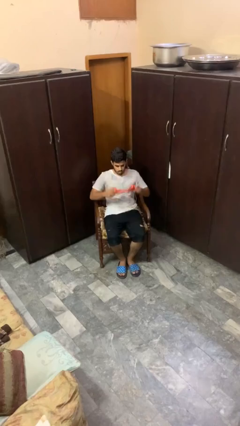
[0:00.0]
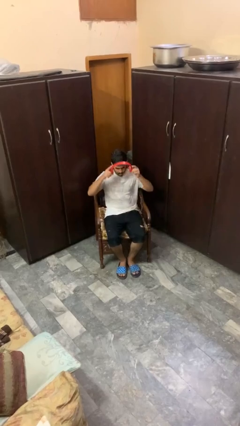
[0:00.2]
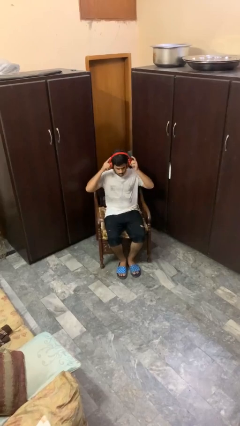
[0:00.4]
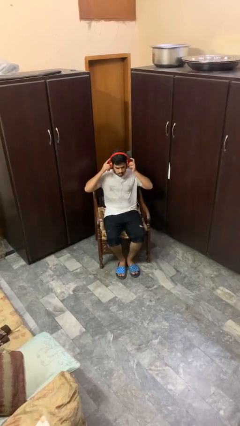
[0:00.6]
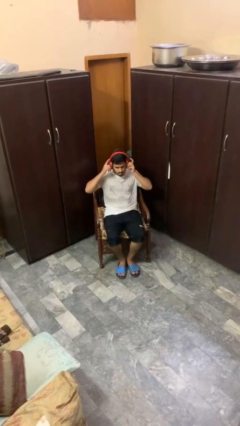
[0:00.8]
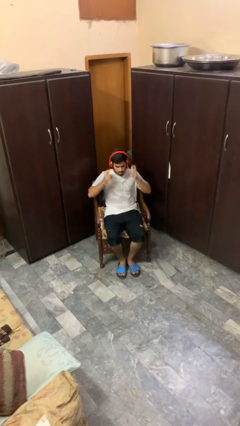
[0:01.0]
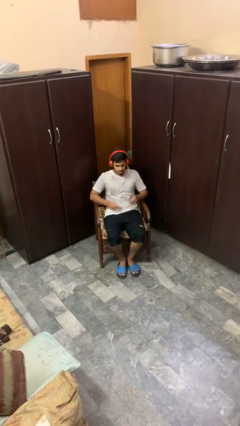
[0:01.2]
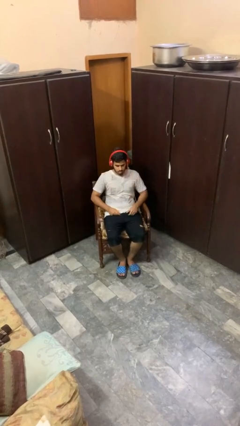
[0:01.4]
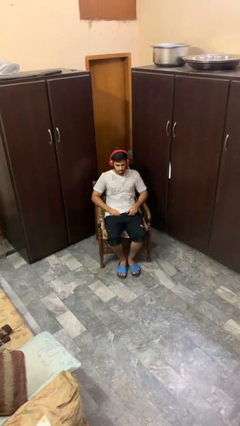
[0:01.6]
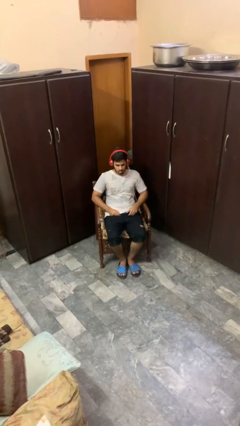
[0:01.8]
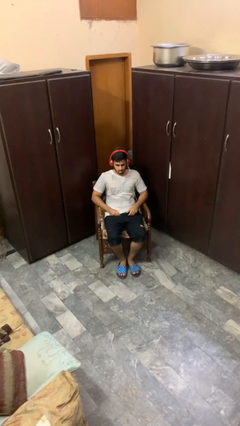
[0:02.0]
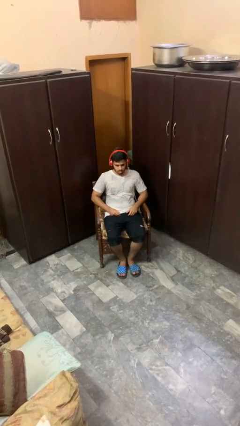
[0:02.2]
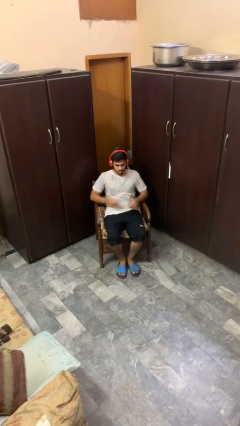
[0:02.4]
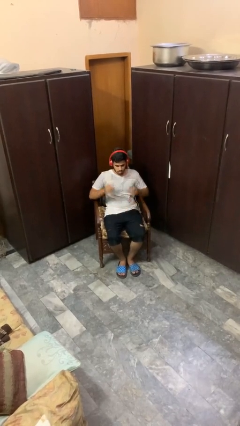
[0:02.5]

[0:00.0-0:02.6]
person puts on headphones

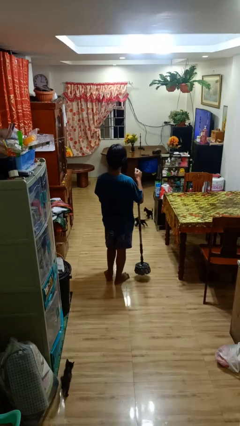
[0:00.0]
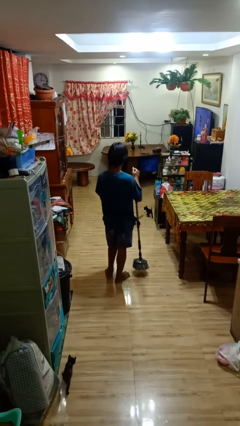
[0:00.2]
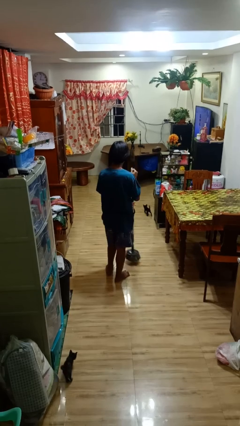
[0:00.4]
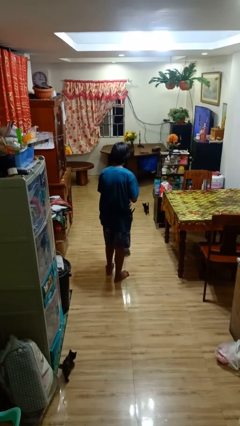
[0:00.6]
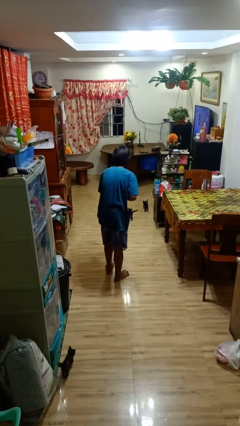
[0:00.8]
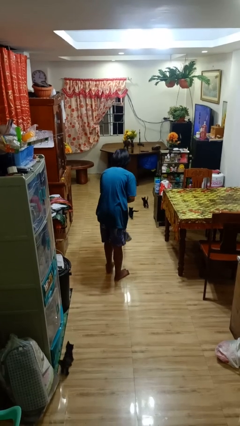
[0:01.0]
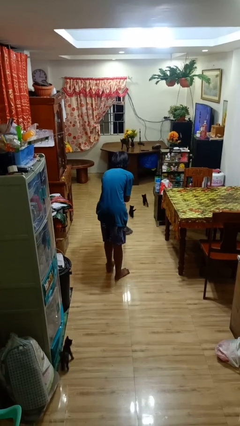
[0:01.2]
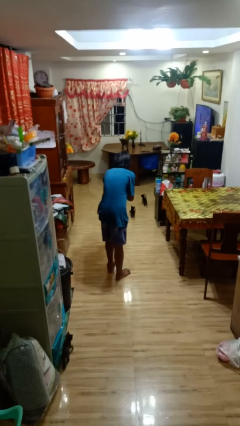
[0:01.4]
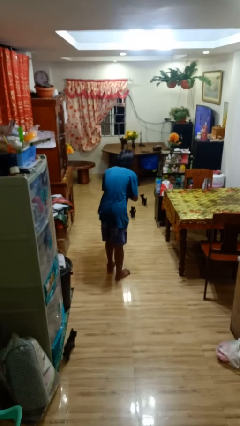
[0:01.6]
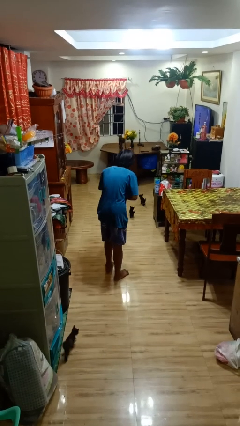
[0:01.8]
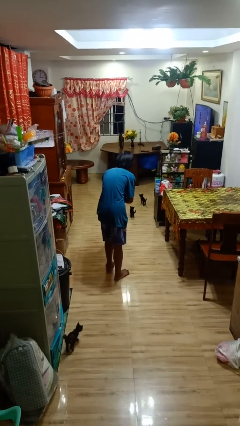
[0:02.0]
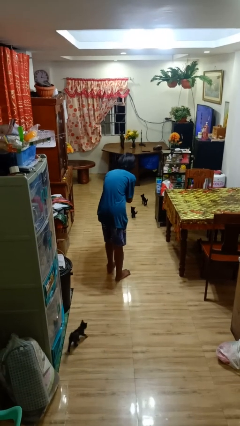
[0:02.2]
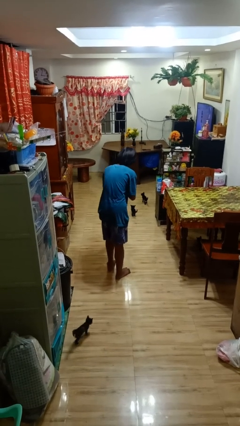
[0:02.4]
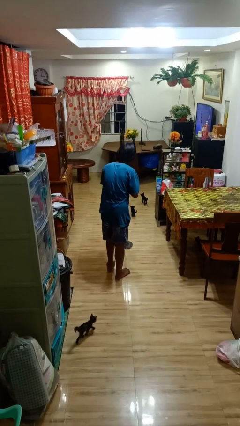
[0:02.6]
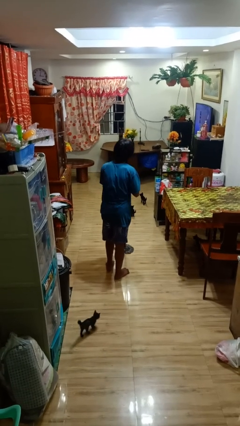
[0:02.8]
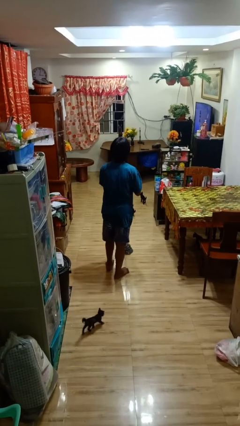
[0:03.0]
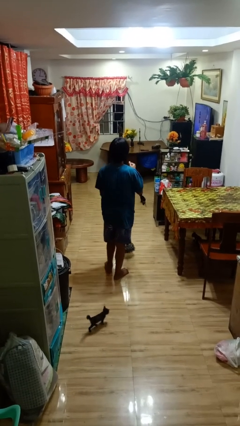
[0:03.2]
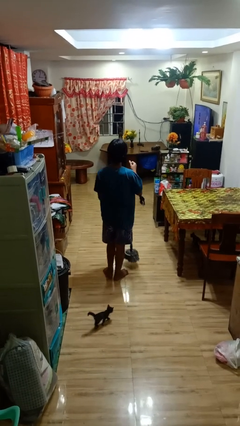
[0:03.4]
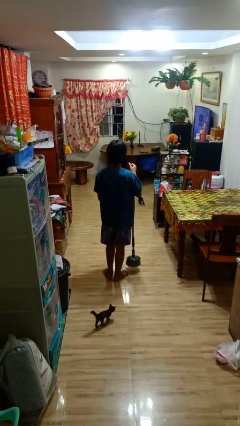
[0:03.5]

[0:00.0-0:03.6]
person mops

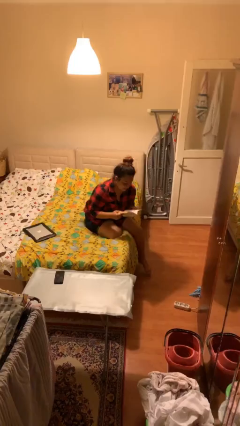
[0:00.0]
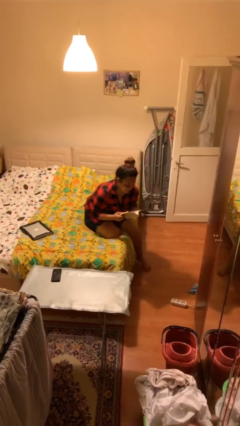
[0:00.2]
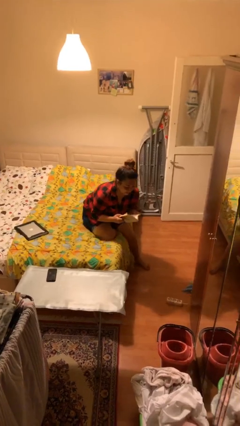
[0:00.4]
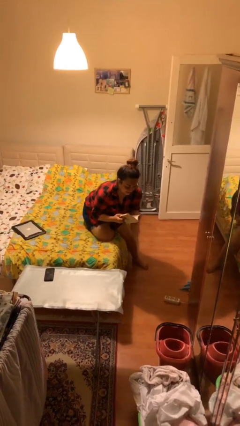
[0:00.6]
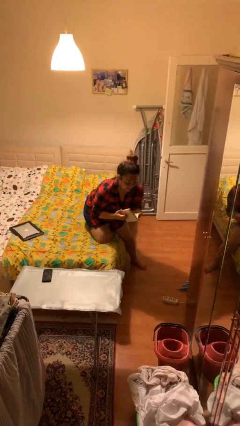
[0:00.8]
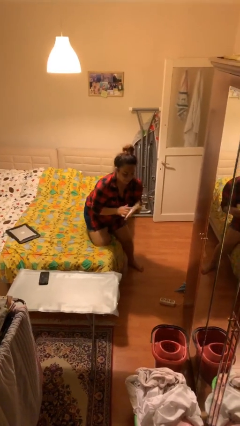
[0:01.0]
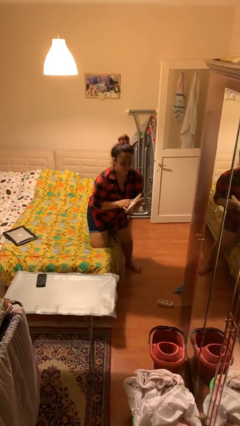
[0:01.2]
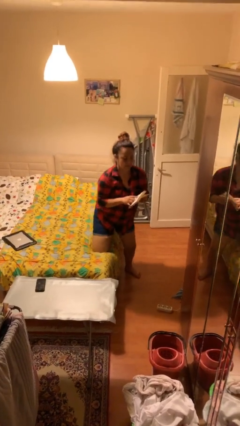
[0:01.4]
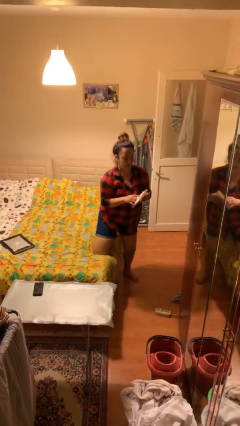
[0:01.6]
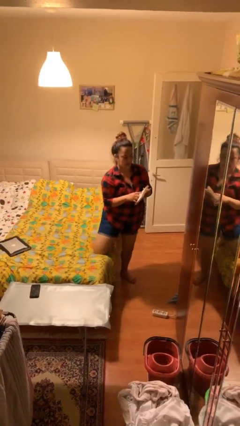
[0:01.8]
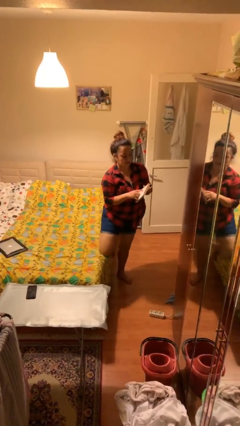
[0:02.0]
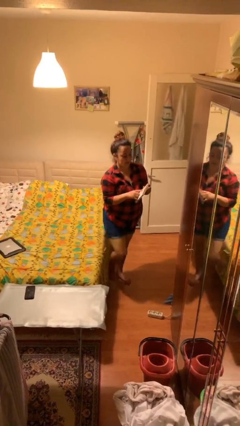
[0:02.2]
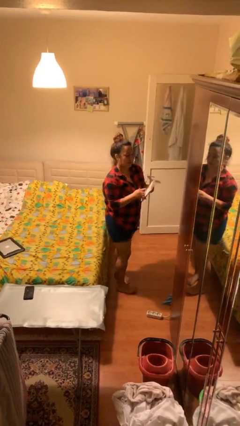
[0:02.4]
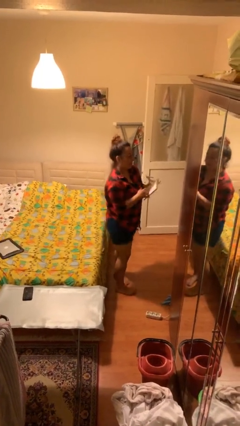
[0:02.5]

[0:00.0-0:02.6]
person stands up

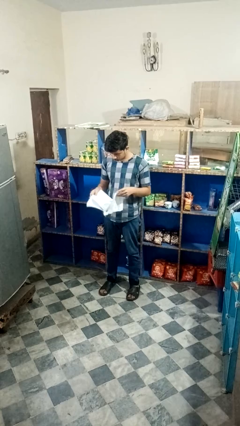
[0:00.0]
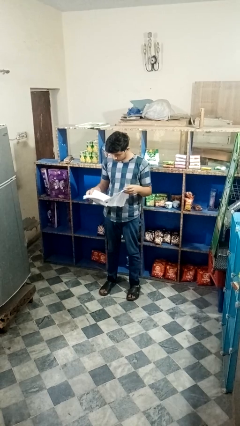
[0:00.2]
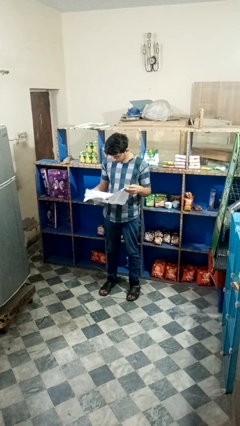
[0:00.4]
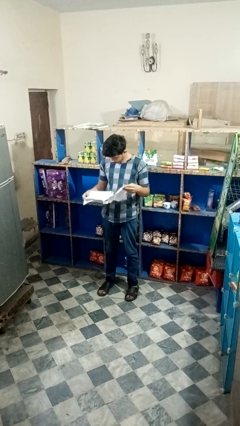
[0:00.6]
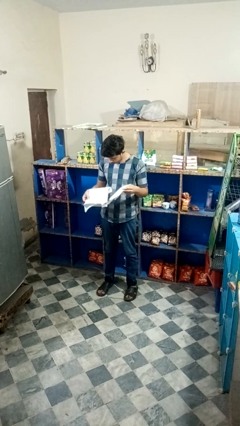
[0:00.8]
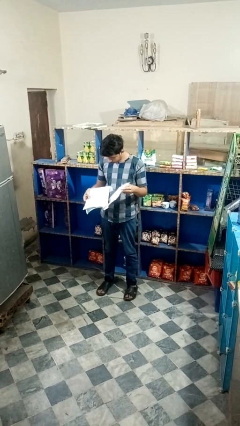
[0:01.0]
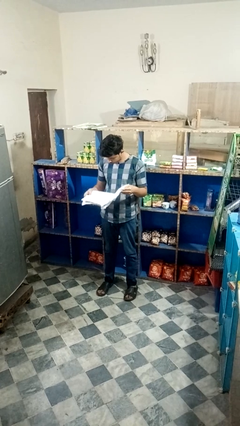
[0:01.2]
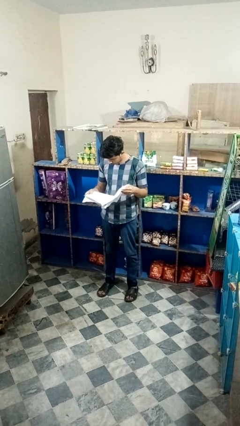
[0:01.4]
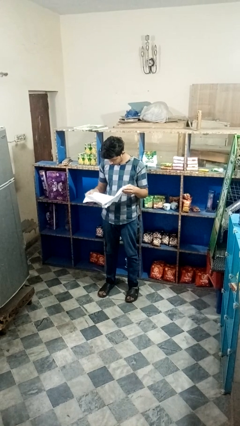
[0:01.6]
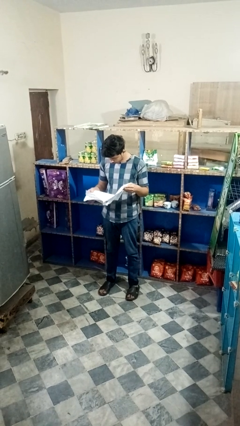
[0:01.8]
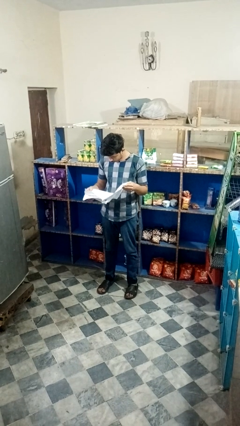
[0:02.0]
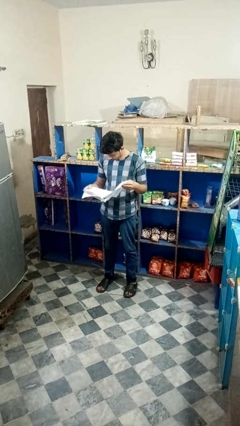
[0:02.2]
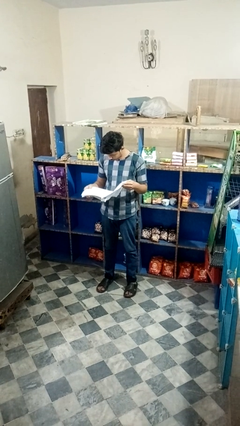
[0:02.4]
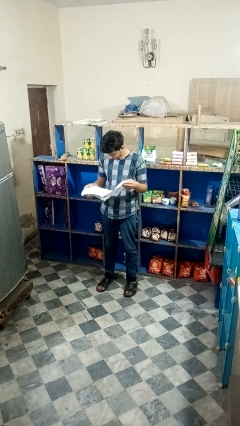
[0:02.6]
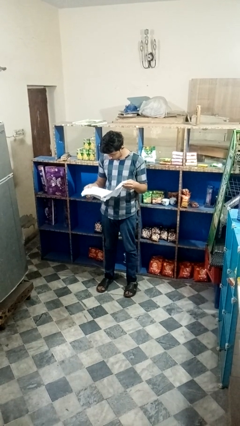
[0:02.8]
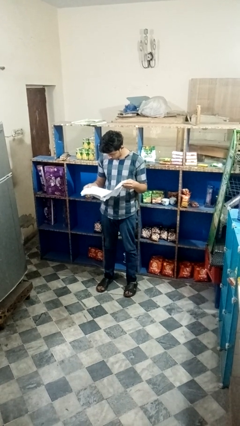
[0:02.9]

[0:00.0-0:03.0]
person reads newspaper

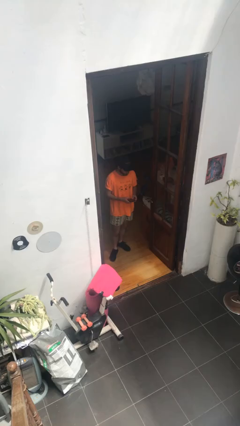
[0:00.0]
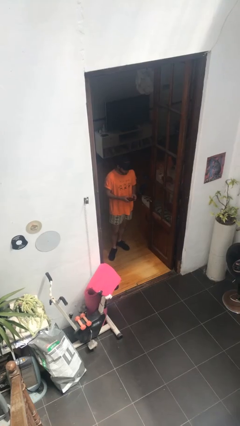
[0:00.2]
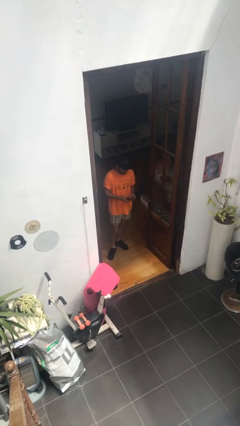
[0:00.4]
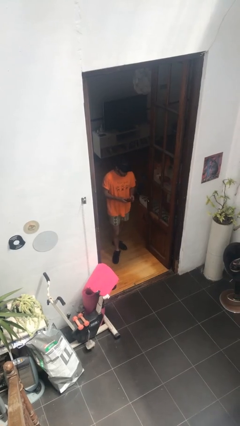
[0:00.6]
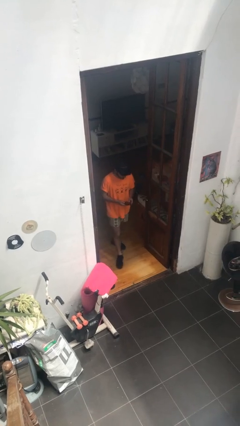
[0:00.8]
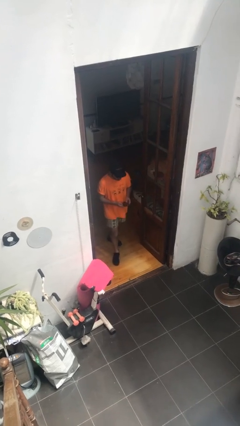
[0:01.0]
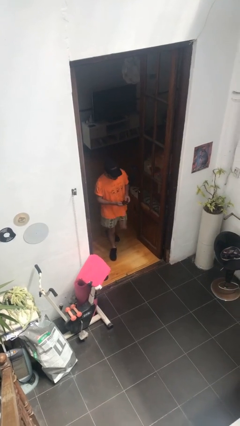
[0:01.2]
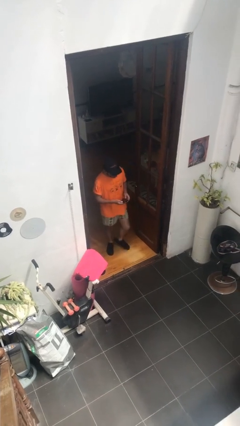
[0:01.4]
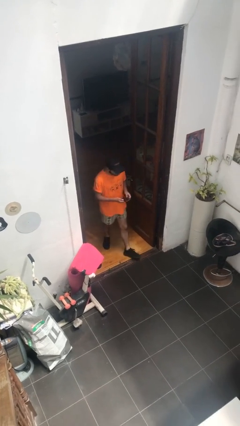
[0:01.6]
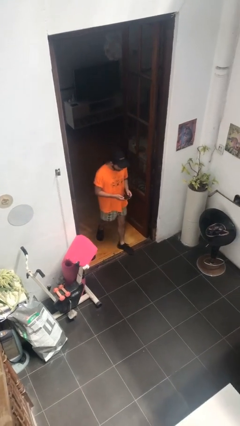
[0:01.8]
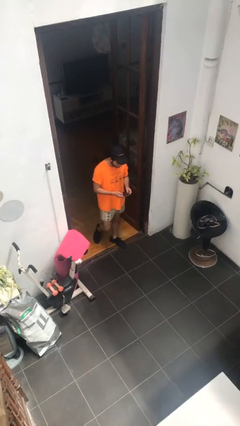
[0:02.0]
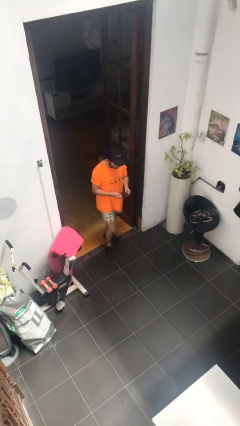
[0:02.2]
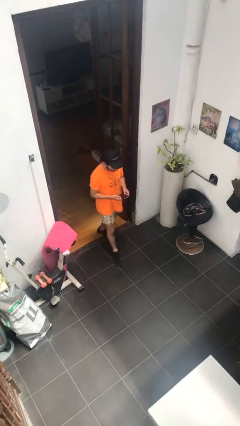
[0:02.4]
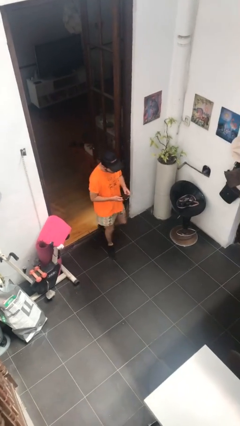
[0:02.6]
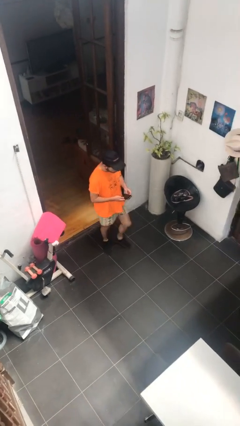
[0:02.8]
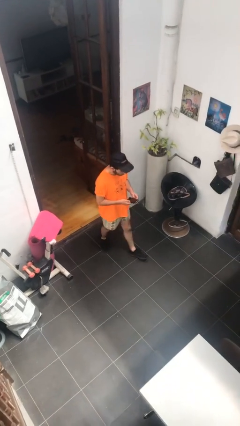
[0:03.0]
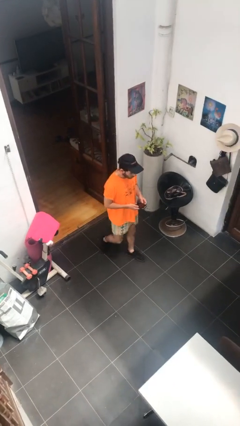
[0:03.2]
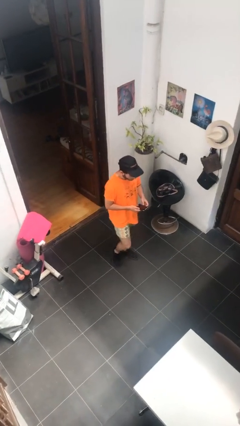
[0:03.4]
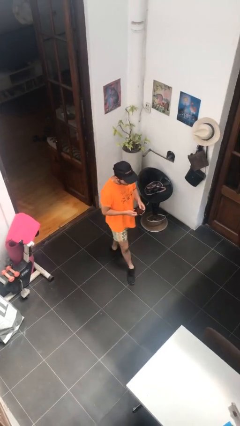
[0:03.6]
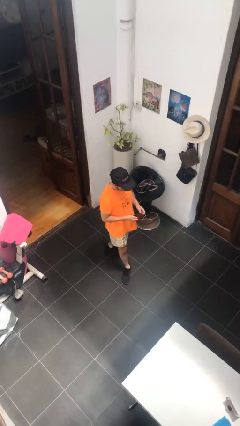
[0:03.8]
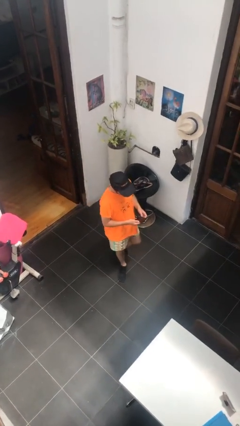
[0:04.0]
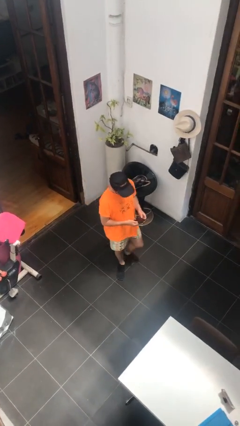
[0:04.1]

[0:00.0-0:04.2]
person enters scene through structure

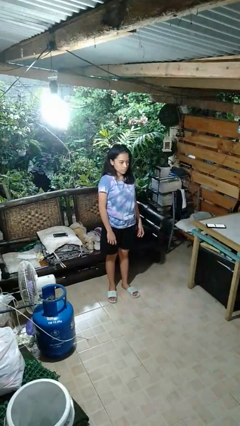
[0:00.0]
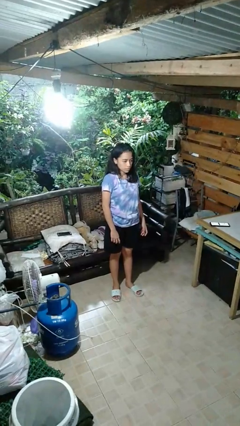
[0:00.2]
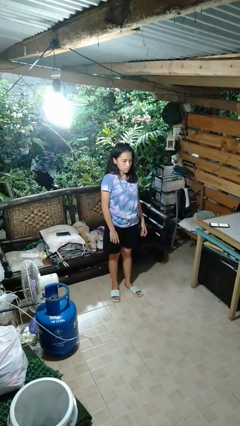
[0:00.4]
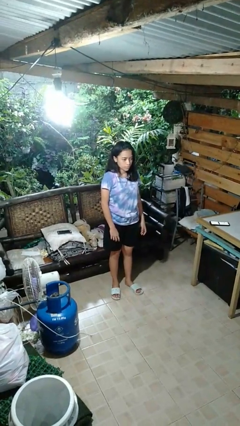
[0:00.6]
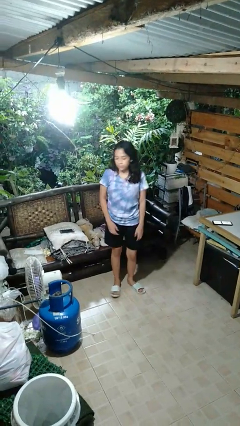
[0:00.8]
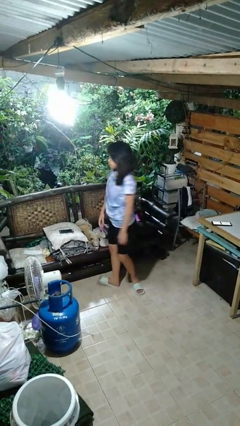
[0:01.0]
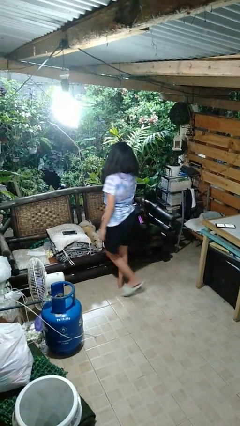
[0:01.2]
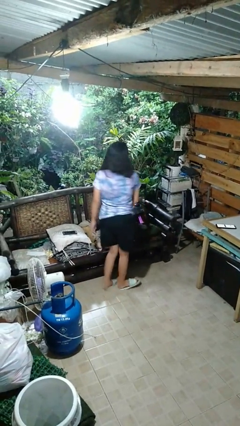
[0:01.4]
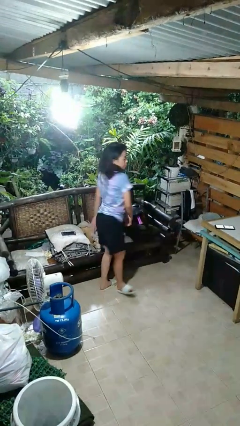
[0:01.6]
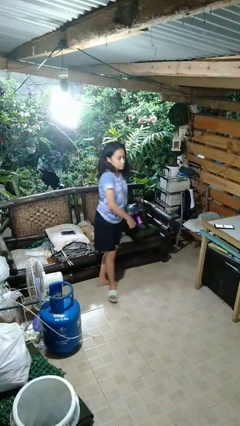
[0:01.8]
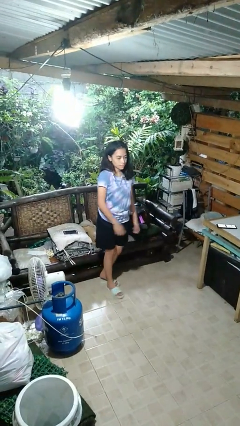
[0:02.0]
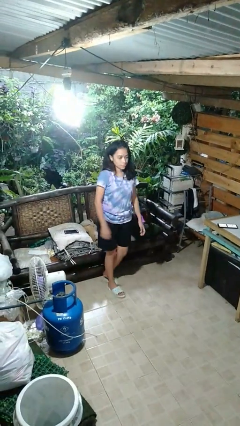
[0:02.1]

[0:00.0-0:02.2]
person twirls
